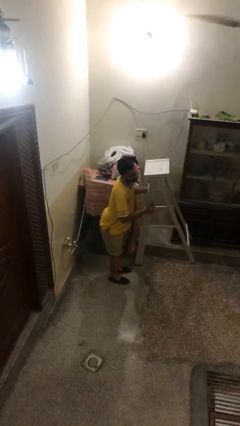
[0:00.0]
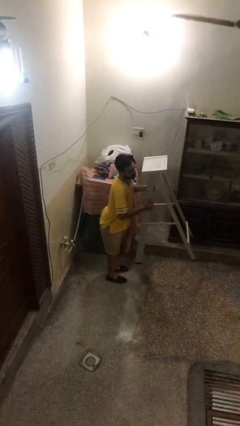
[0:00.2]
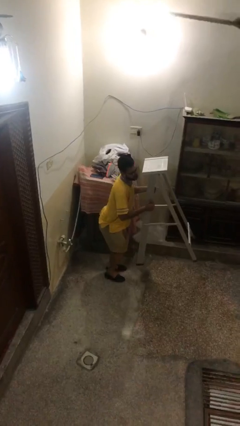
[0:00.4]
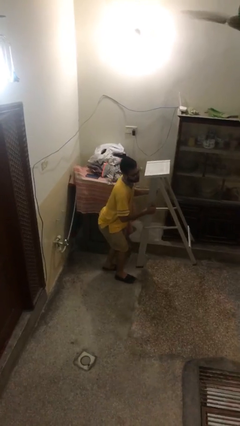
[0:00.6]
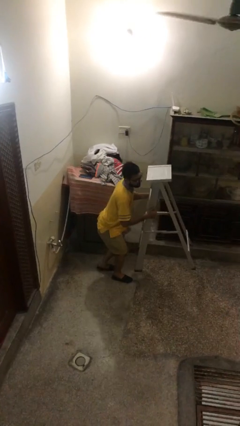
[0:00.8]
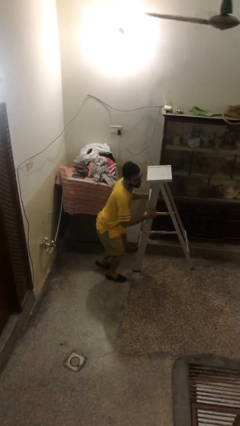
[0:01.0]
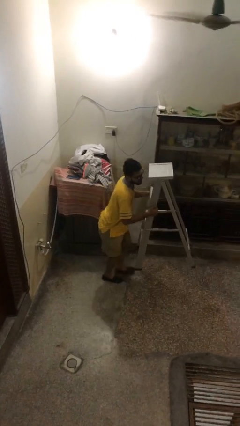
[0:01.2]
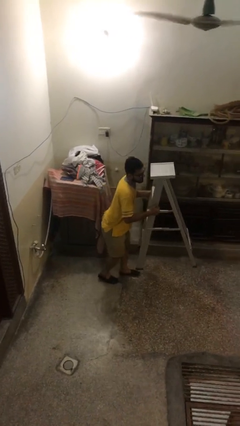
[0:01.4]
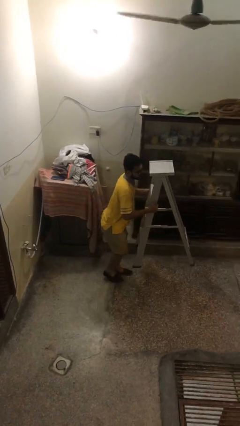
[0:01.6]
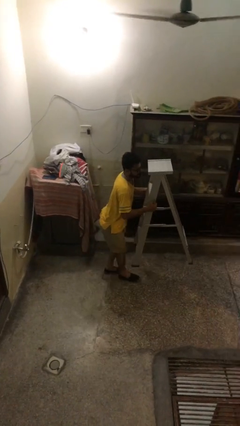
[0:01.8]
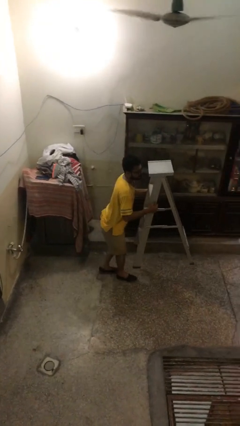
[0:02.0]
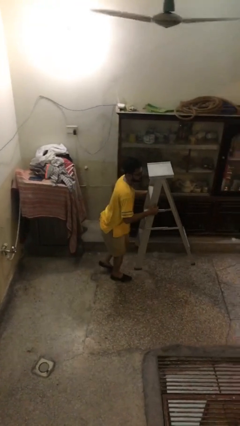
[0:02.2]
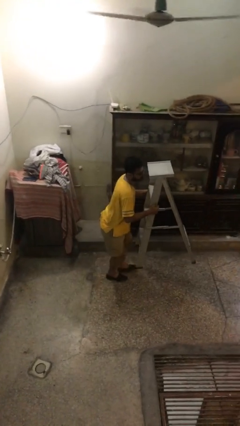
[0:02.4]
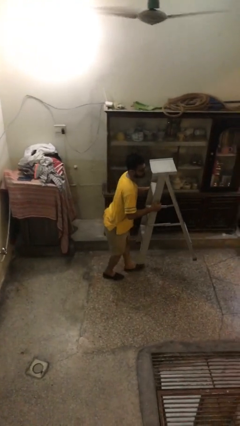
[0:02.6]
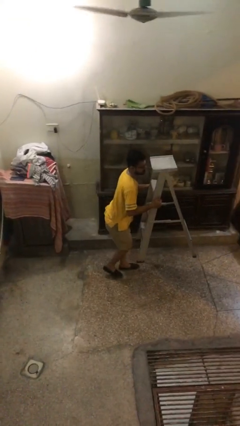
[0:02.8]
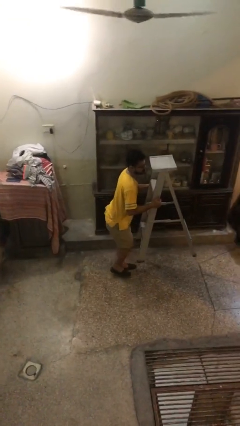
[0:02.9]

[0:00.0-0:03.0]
person carries heavy object

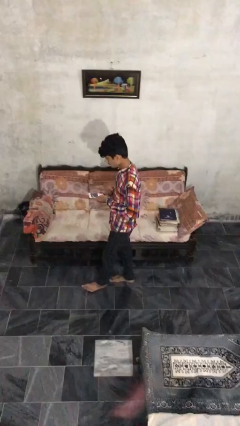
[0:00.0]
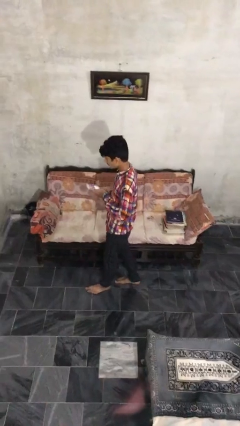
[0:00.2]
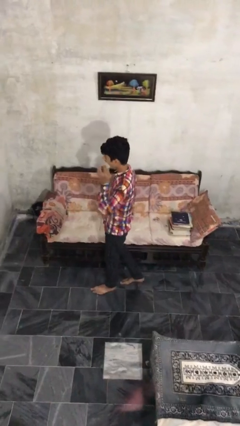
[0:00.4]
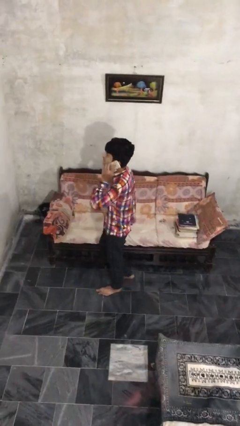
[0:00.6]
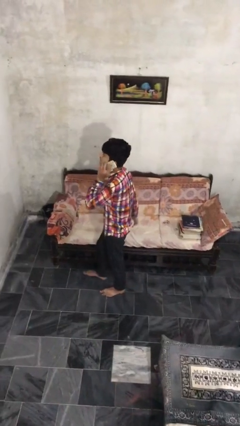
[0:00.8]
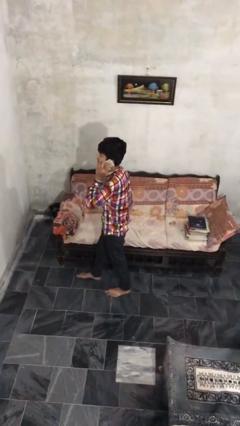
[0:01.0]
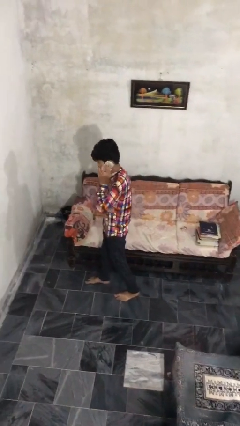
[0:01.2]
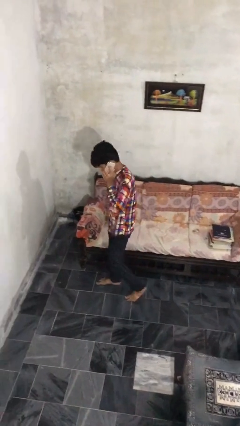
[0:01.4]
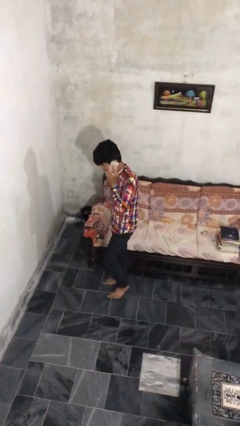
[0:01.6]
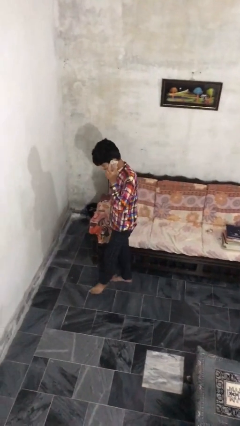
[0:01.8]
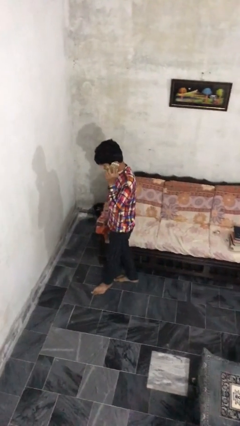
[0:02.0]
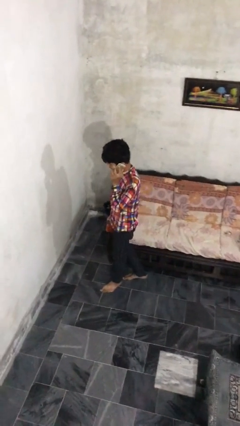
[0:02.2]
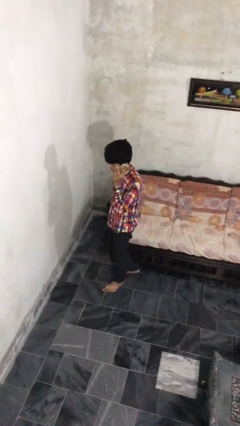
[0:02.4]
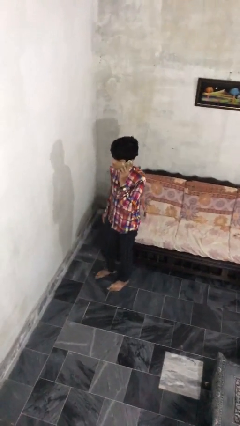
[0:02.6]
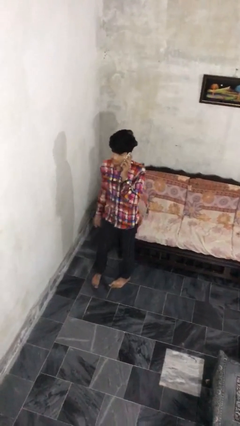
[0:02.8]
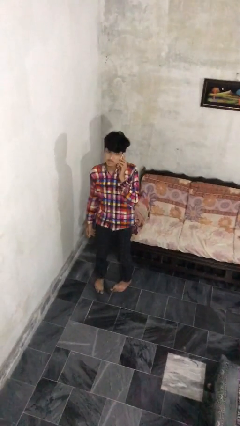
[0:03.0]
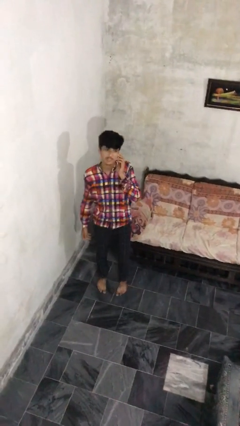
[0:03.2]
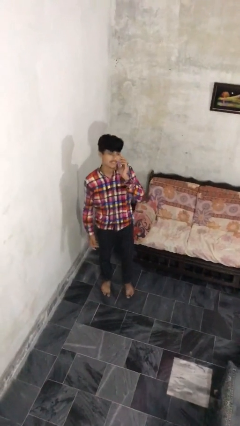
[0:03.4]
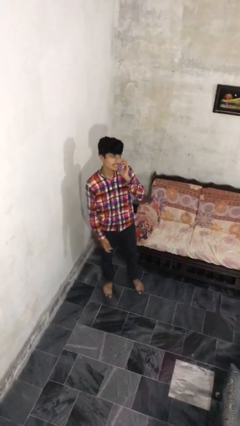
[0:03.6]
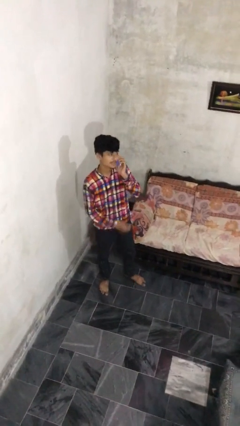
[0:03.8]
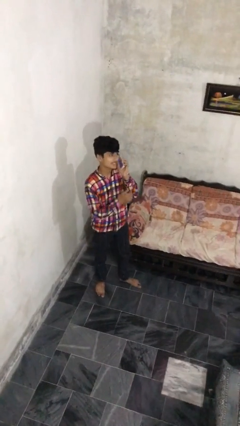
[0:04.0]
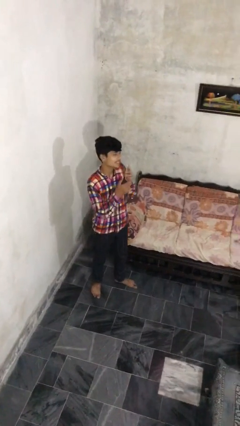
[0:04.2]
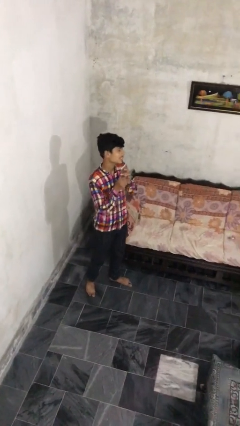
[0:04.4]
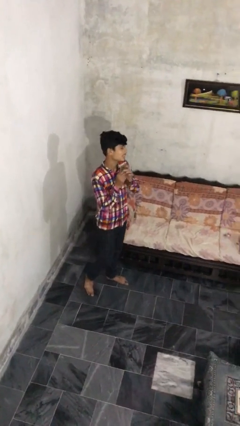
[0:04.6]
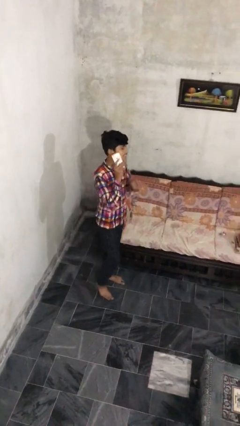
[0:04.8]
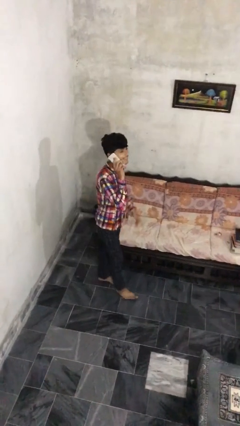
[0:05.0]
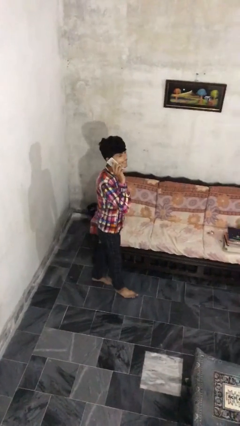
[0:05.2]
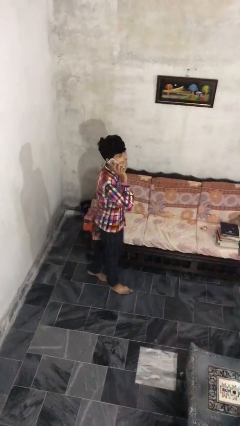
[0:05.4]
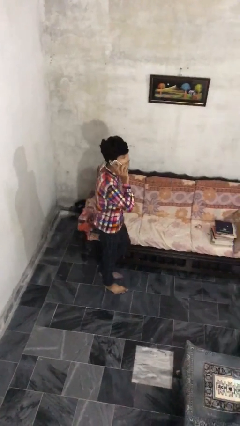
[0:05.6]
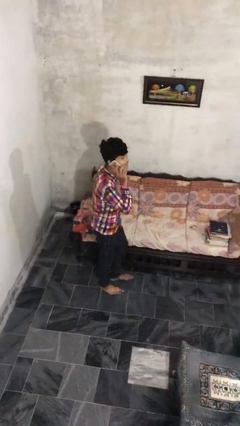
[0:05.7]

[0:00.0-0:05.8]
person talks on phone

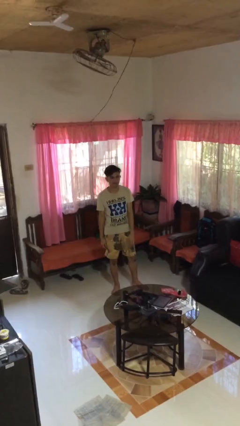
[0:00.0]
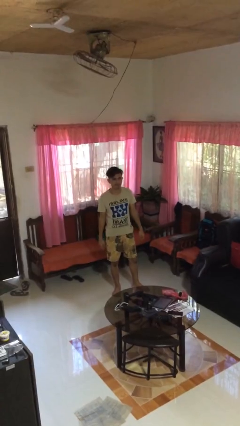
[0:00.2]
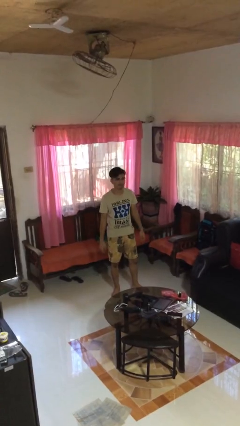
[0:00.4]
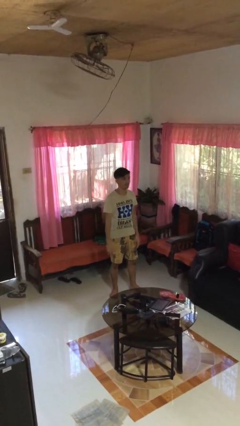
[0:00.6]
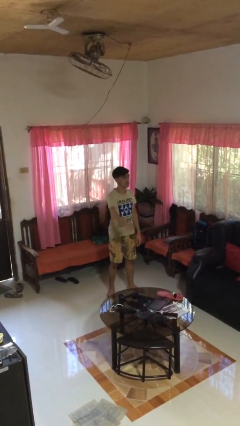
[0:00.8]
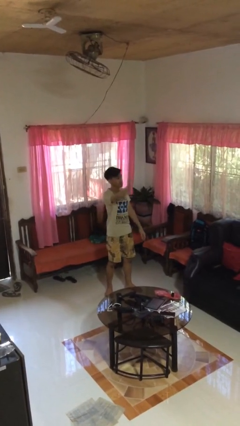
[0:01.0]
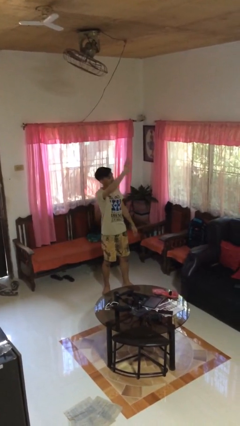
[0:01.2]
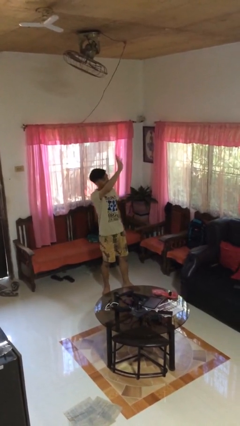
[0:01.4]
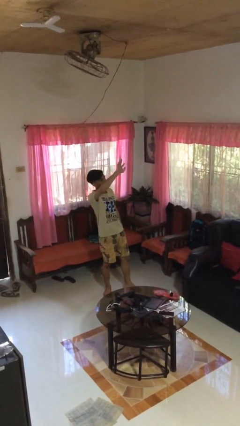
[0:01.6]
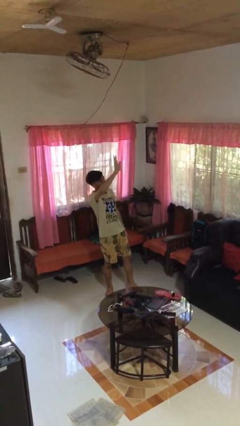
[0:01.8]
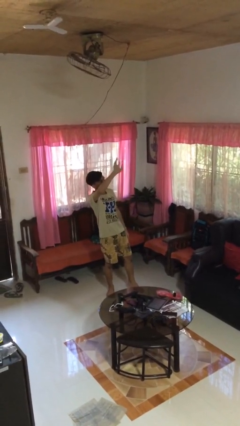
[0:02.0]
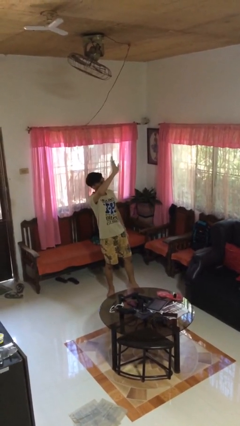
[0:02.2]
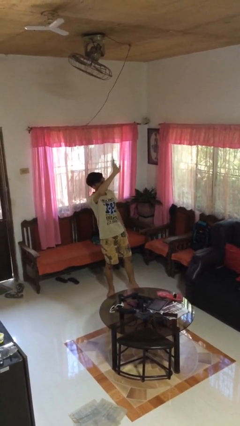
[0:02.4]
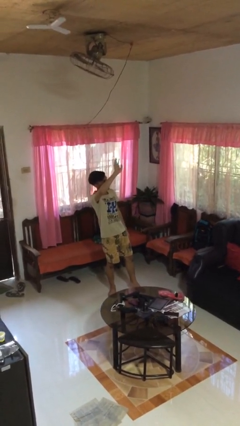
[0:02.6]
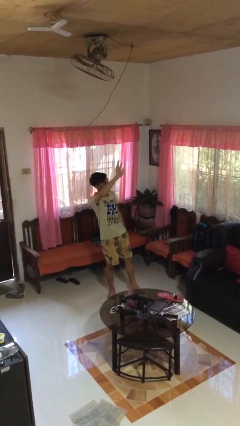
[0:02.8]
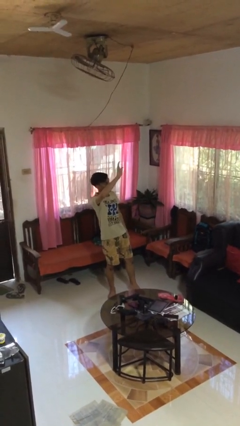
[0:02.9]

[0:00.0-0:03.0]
person waves at person

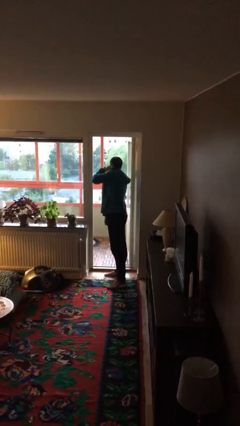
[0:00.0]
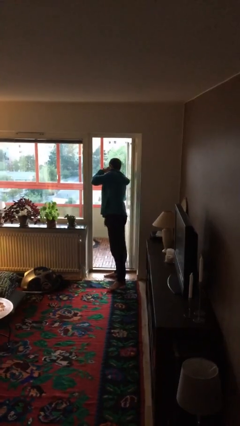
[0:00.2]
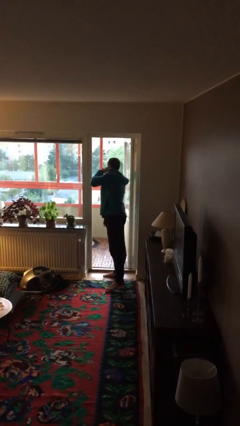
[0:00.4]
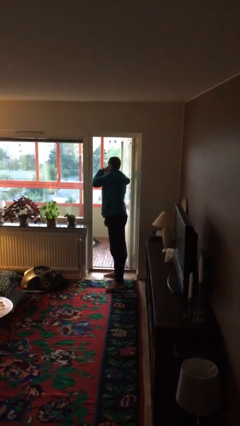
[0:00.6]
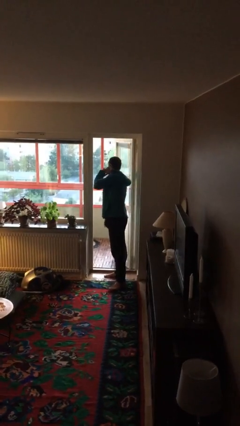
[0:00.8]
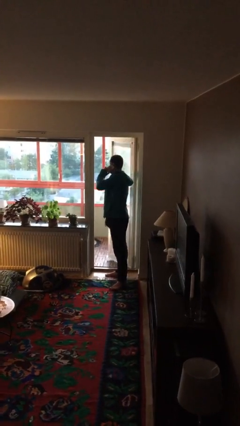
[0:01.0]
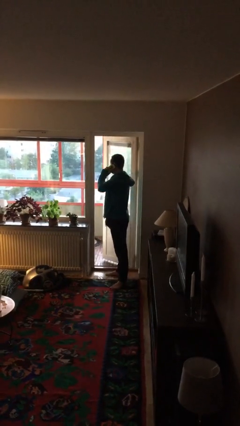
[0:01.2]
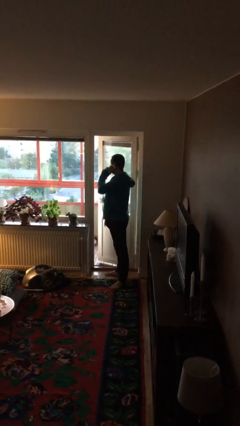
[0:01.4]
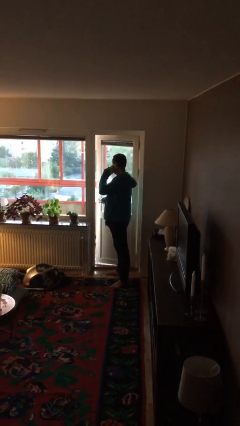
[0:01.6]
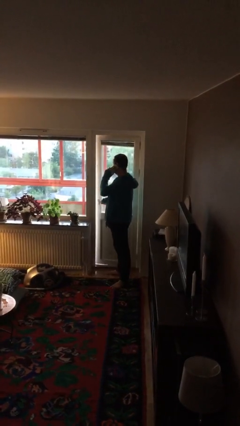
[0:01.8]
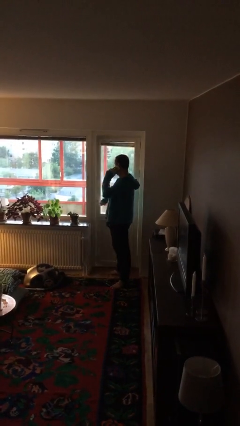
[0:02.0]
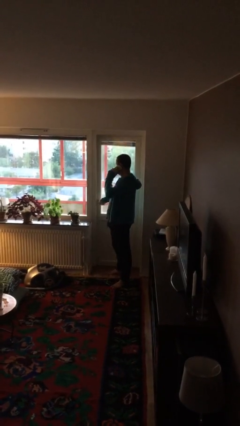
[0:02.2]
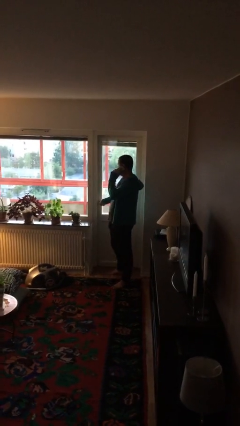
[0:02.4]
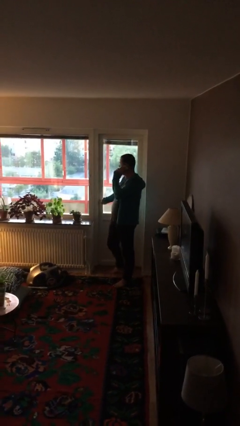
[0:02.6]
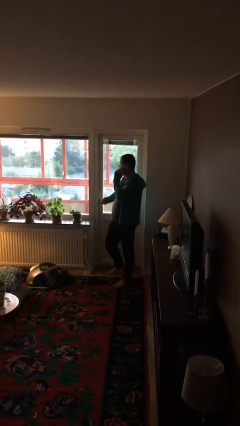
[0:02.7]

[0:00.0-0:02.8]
person closes facility door

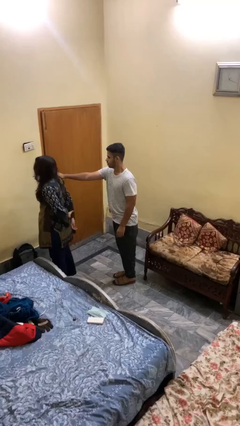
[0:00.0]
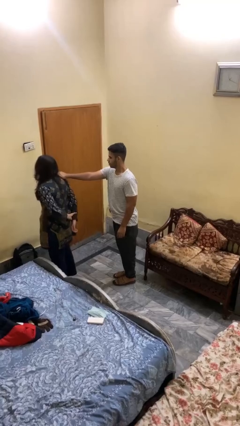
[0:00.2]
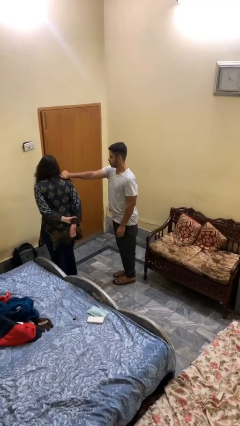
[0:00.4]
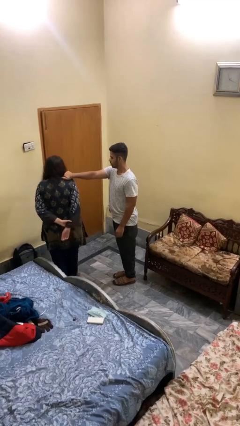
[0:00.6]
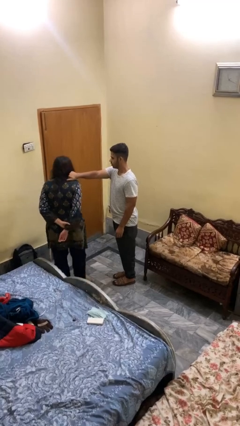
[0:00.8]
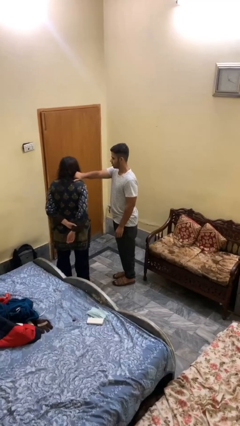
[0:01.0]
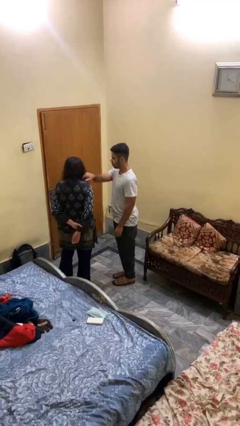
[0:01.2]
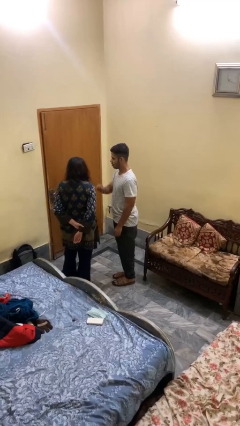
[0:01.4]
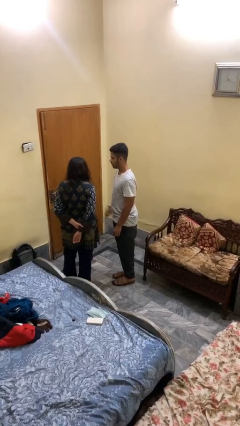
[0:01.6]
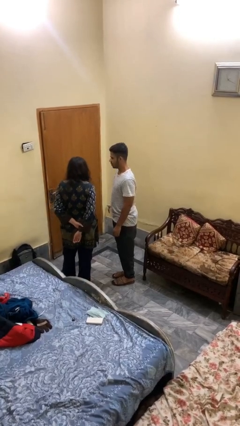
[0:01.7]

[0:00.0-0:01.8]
person spins person around

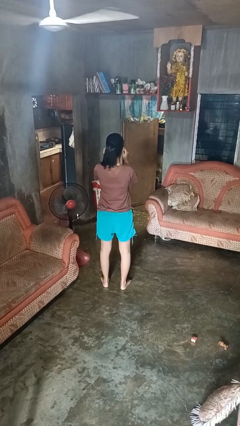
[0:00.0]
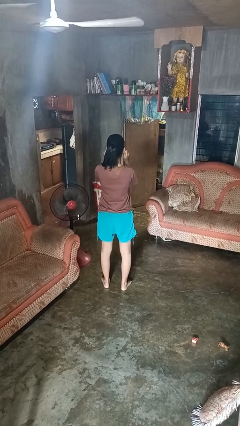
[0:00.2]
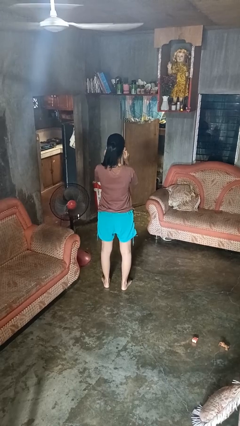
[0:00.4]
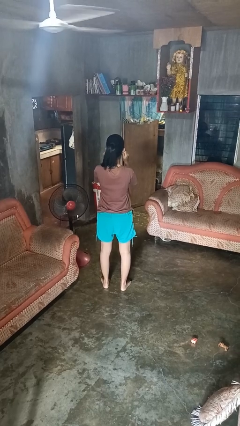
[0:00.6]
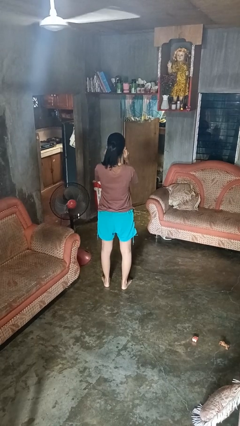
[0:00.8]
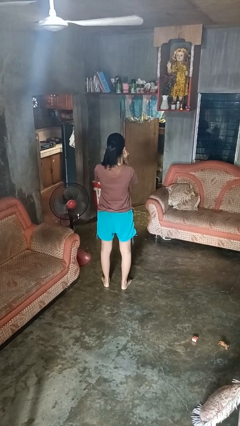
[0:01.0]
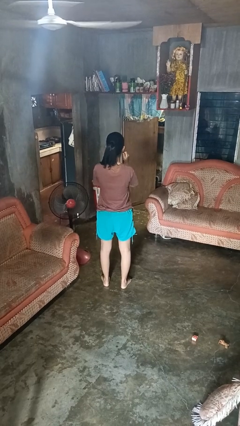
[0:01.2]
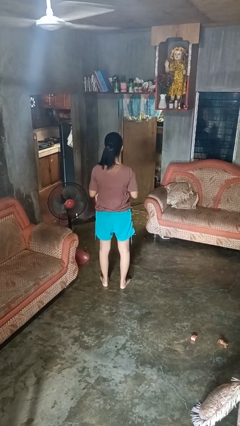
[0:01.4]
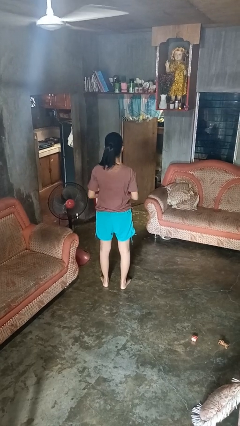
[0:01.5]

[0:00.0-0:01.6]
person touches earlobe
